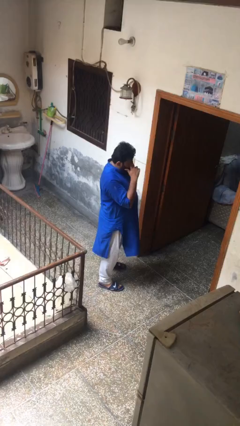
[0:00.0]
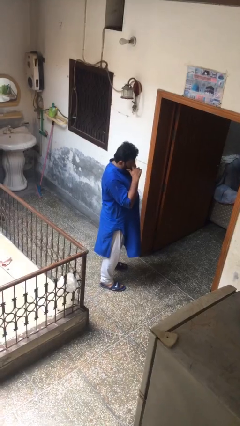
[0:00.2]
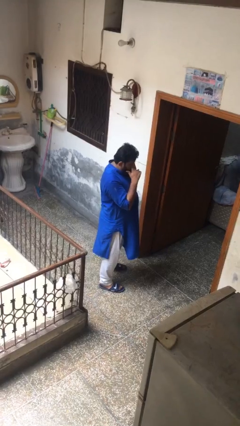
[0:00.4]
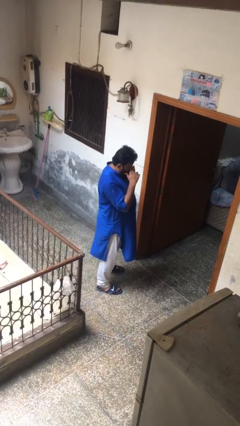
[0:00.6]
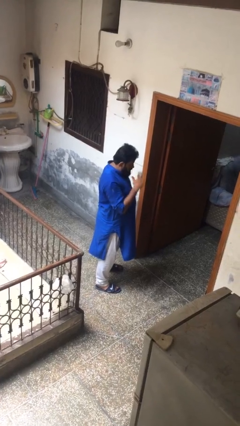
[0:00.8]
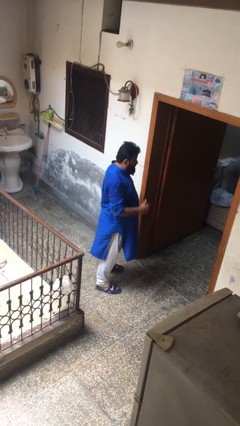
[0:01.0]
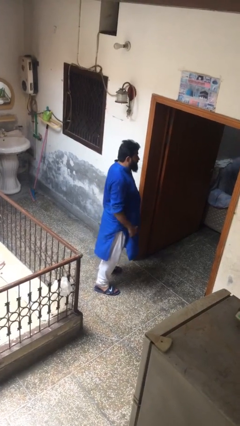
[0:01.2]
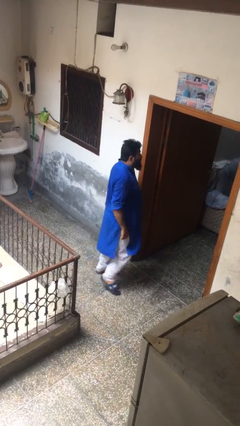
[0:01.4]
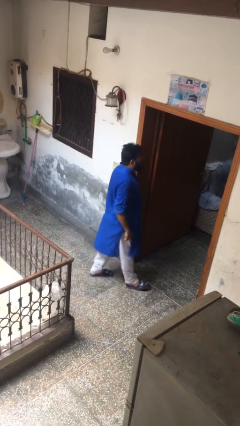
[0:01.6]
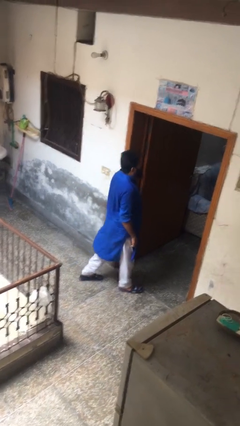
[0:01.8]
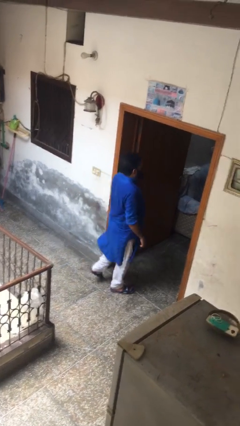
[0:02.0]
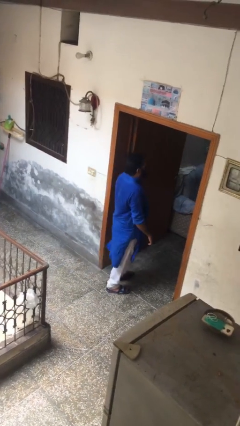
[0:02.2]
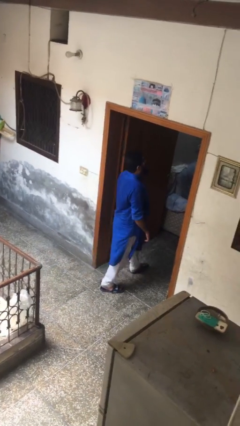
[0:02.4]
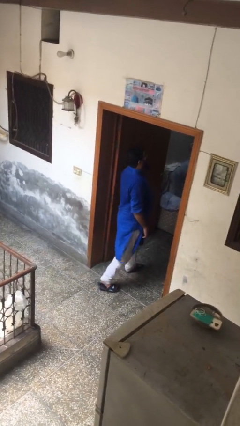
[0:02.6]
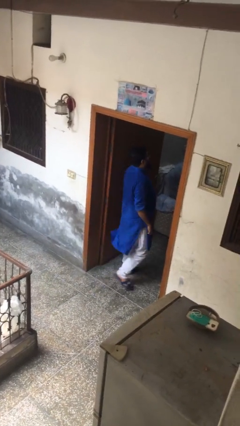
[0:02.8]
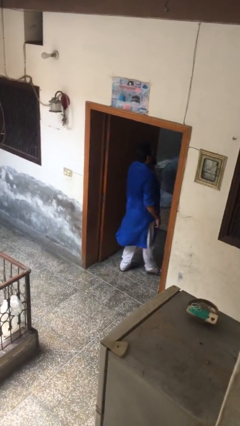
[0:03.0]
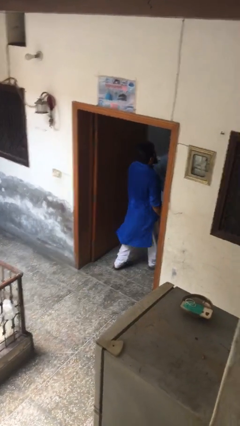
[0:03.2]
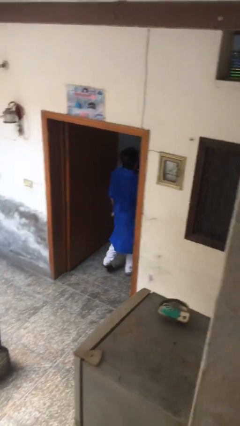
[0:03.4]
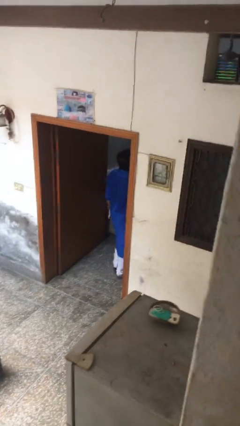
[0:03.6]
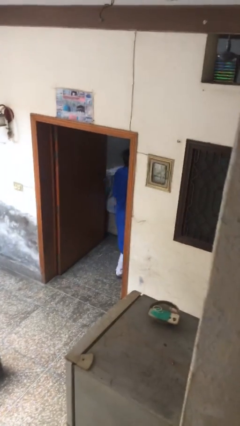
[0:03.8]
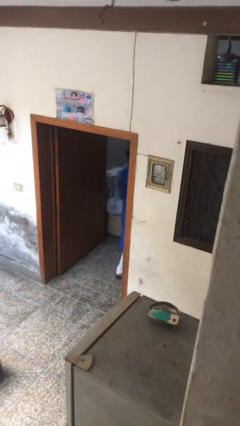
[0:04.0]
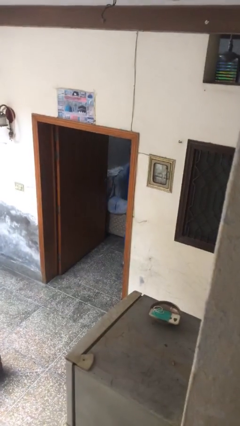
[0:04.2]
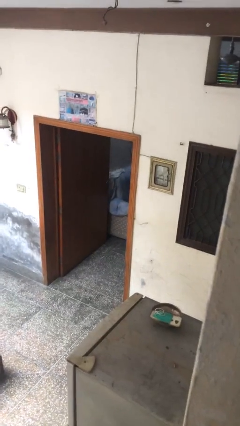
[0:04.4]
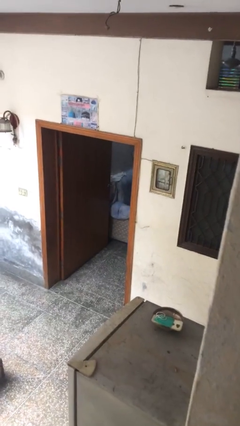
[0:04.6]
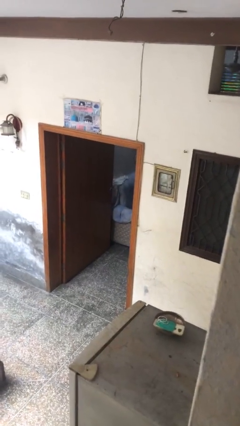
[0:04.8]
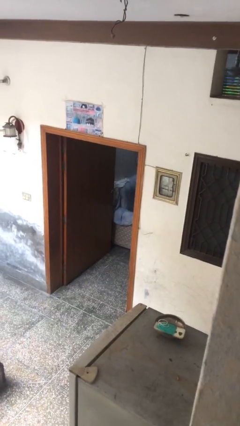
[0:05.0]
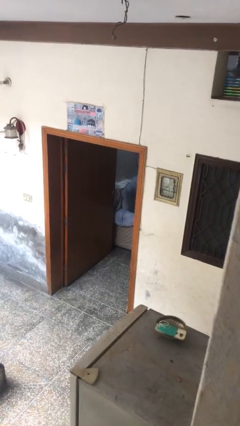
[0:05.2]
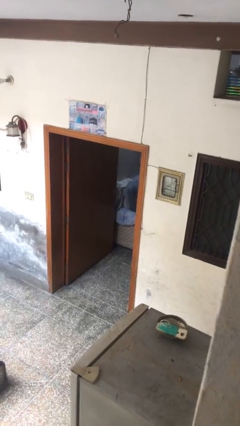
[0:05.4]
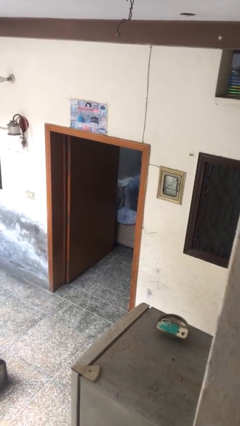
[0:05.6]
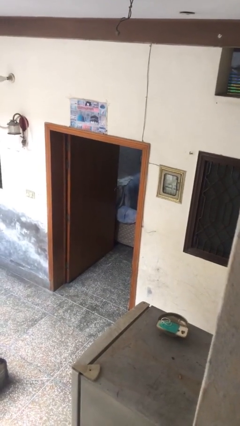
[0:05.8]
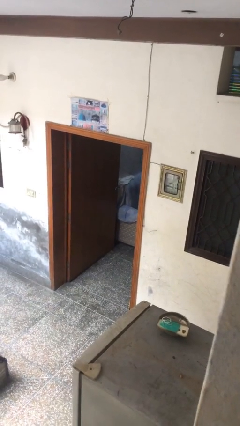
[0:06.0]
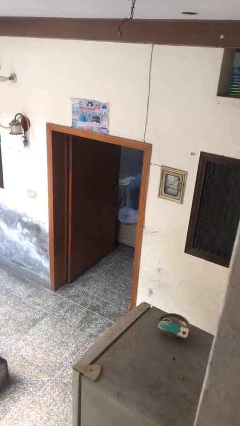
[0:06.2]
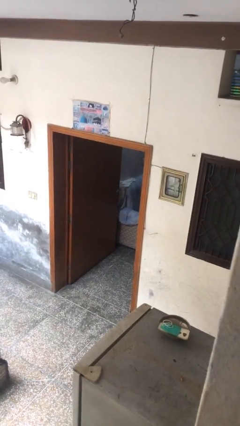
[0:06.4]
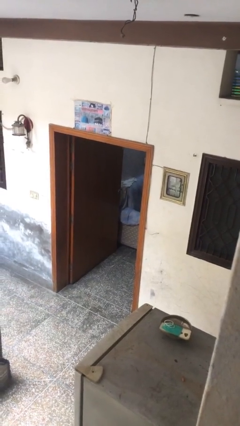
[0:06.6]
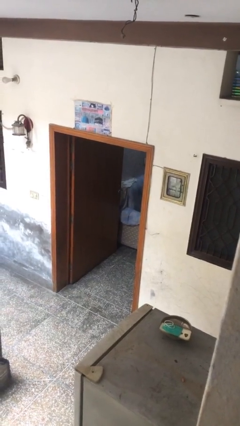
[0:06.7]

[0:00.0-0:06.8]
person exits scene through structure

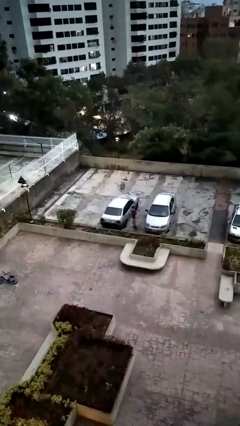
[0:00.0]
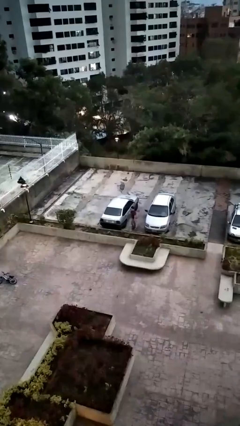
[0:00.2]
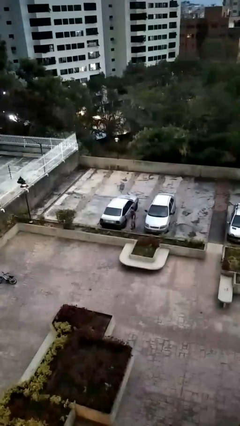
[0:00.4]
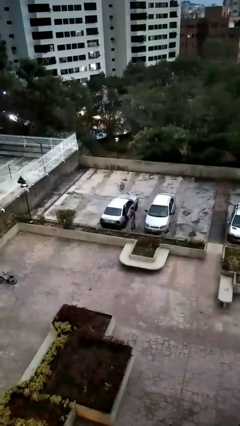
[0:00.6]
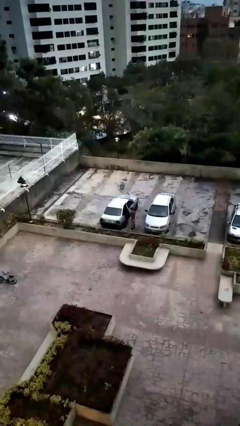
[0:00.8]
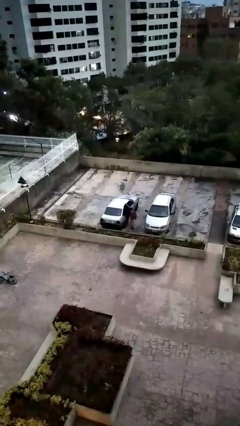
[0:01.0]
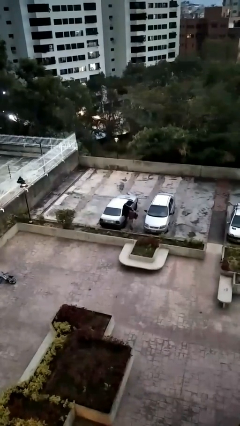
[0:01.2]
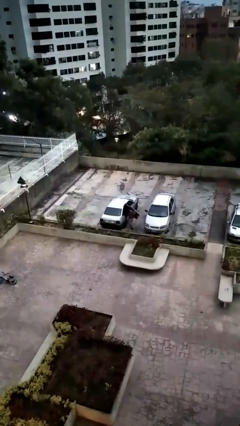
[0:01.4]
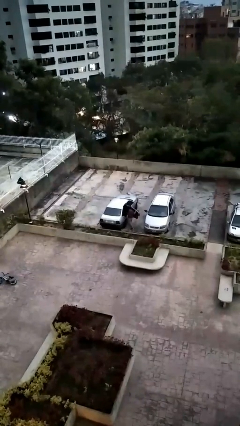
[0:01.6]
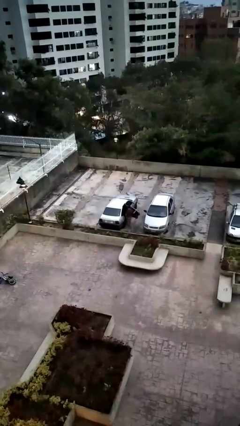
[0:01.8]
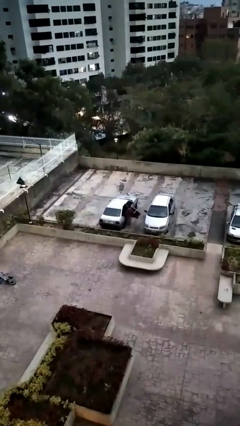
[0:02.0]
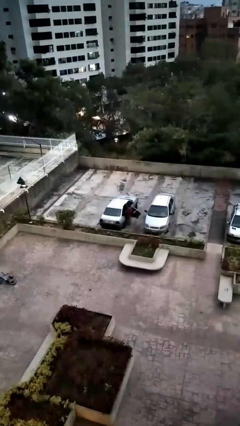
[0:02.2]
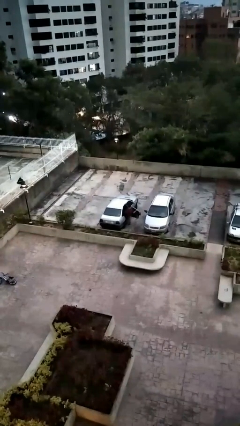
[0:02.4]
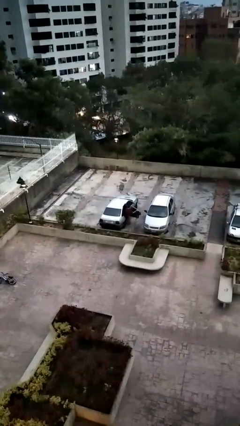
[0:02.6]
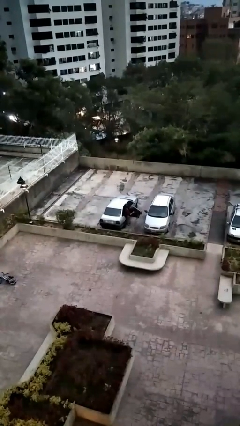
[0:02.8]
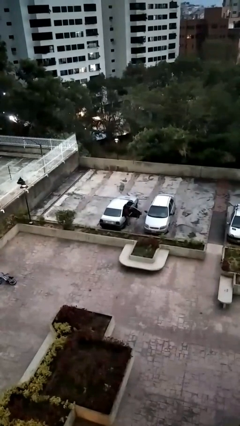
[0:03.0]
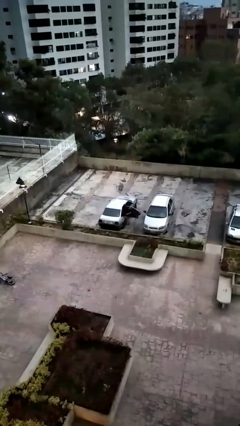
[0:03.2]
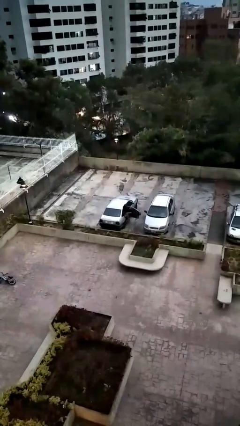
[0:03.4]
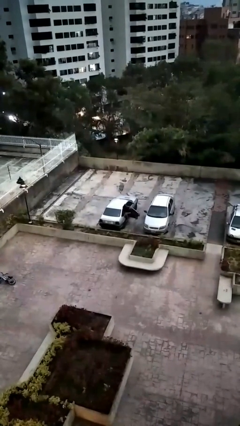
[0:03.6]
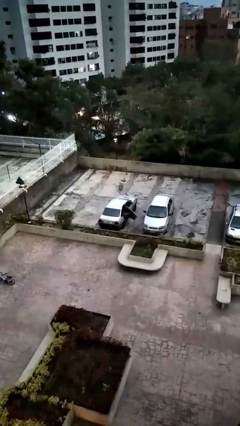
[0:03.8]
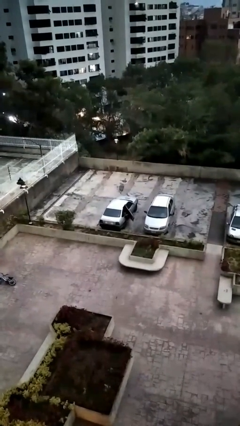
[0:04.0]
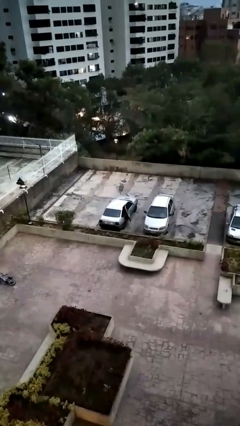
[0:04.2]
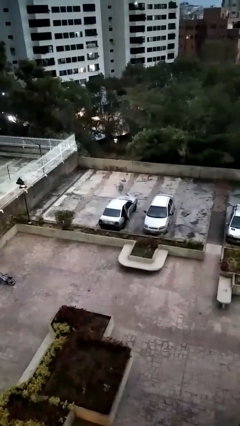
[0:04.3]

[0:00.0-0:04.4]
car picks up person

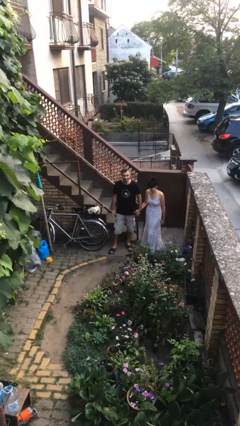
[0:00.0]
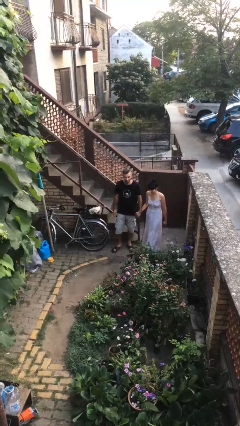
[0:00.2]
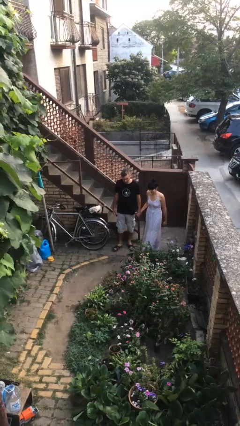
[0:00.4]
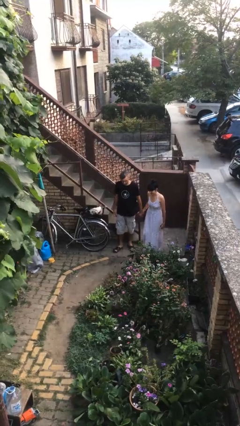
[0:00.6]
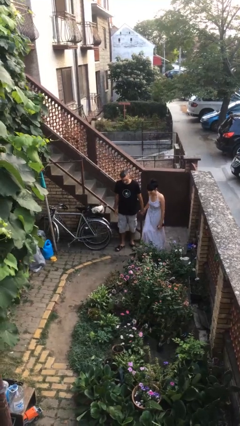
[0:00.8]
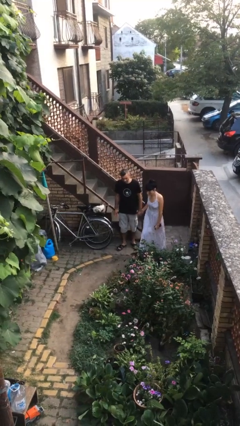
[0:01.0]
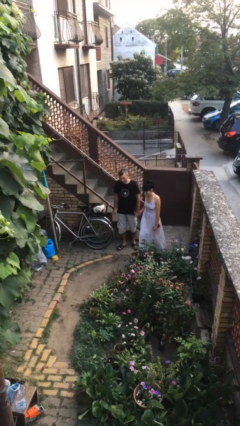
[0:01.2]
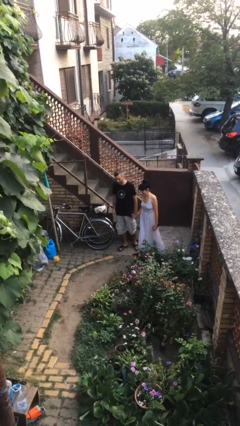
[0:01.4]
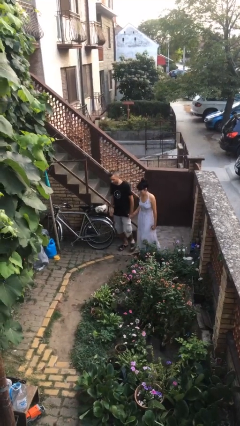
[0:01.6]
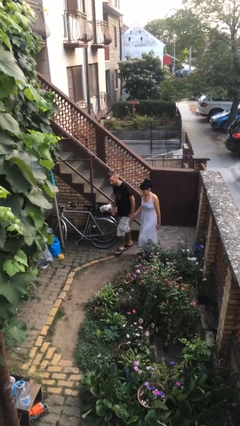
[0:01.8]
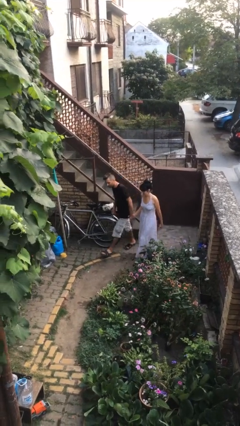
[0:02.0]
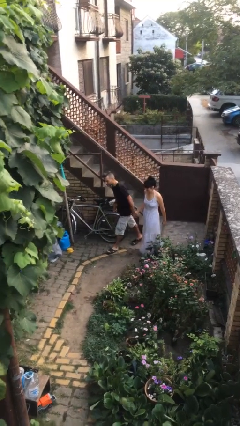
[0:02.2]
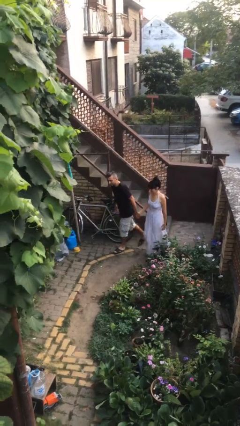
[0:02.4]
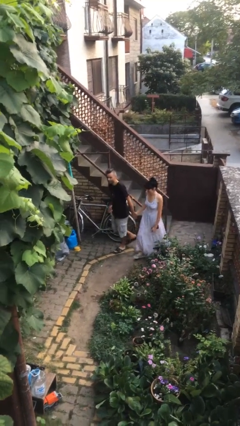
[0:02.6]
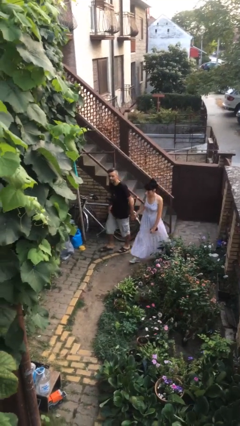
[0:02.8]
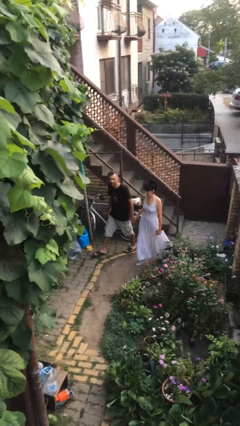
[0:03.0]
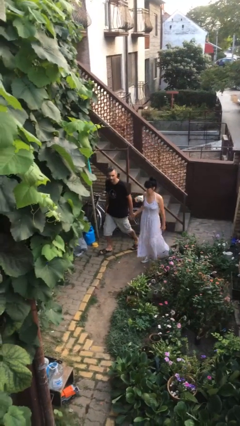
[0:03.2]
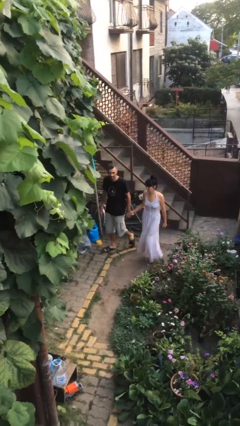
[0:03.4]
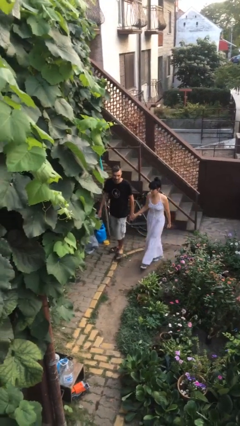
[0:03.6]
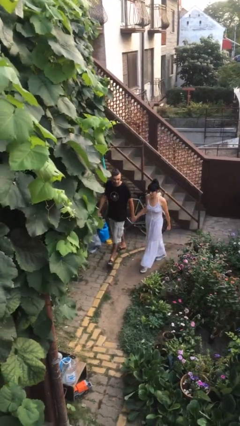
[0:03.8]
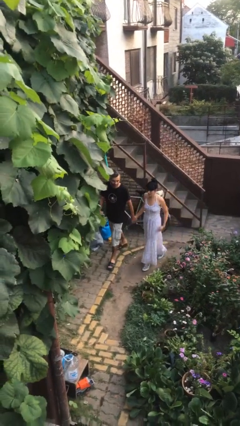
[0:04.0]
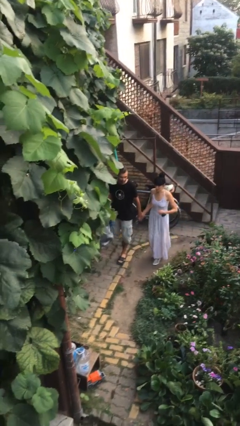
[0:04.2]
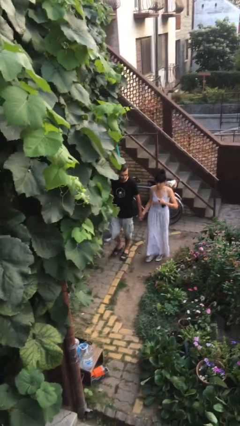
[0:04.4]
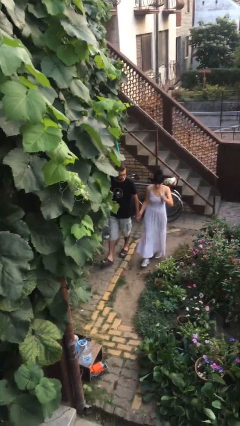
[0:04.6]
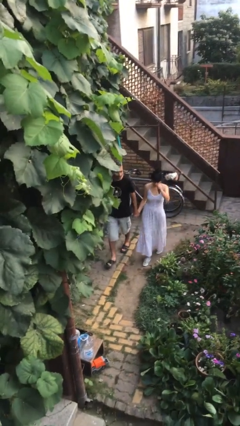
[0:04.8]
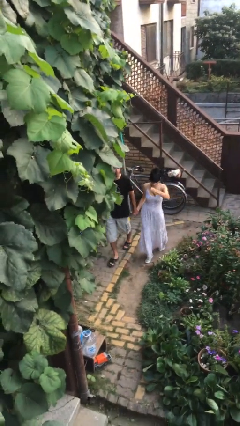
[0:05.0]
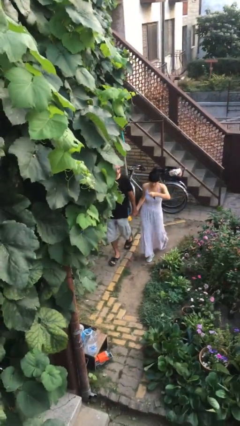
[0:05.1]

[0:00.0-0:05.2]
person holds hand

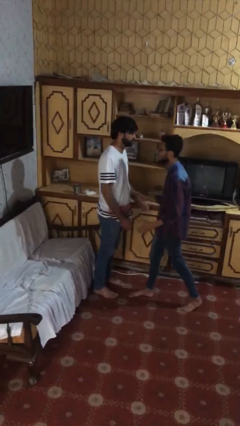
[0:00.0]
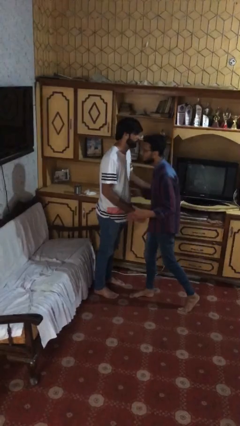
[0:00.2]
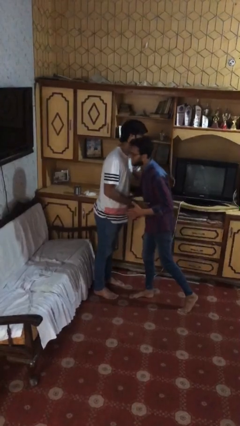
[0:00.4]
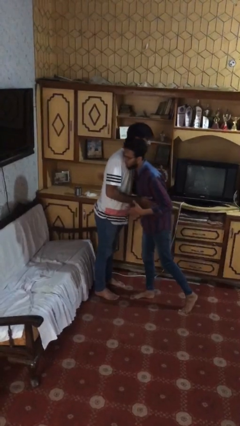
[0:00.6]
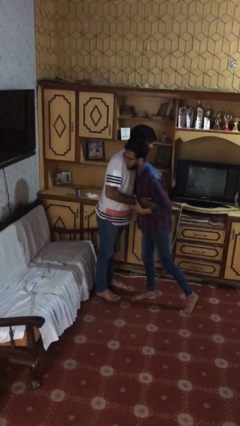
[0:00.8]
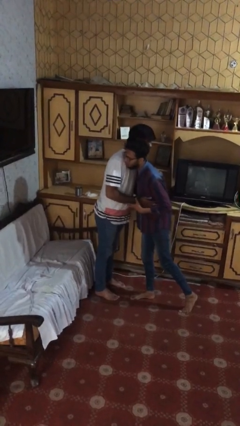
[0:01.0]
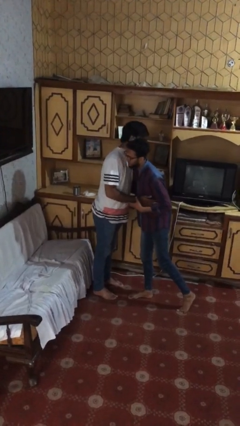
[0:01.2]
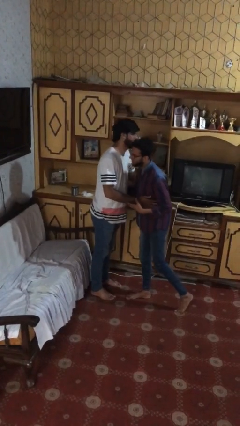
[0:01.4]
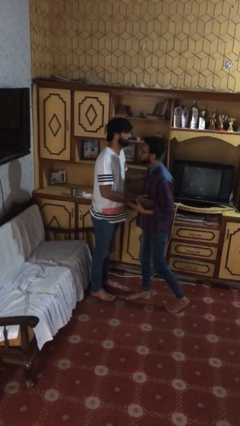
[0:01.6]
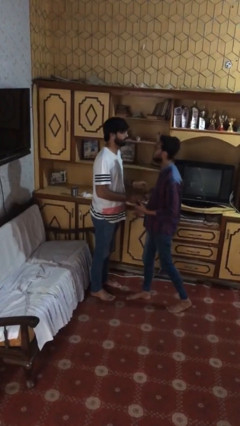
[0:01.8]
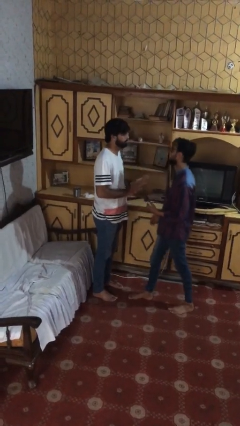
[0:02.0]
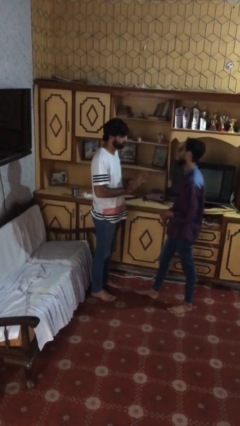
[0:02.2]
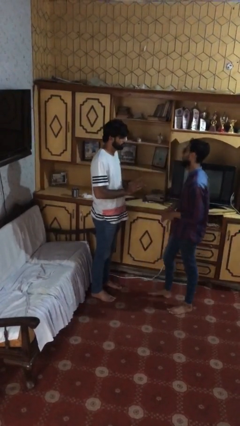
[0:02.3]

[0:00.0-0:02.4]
person embraces person
